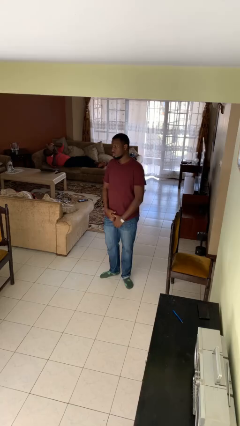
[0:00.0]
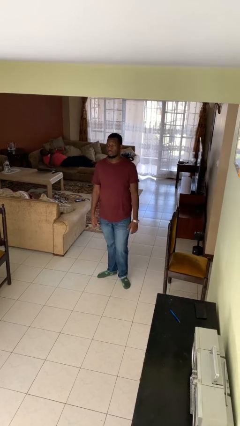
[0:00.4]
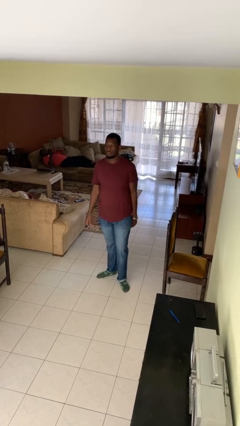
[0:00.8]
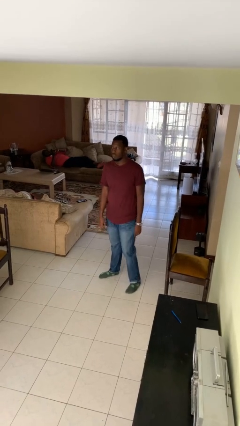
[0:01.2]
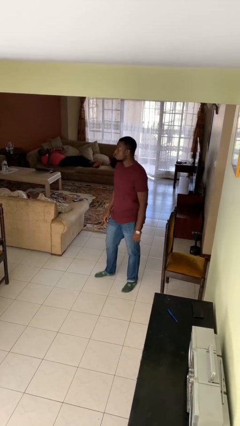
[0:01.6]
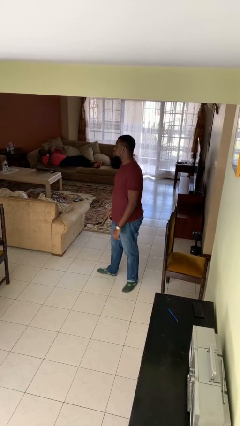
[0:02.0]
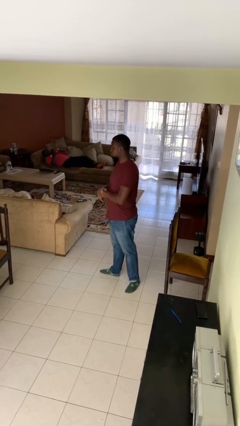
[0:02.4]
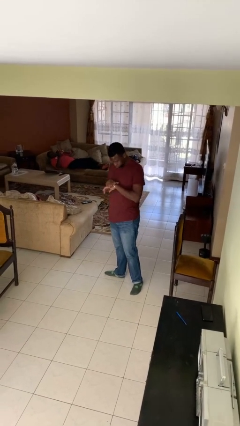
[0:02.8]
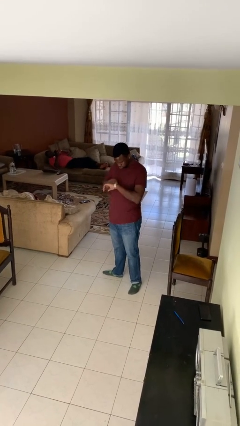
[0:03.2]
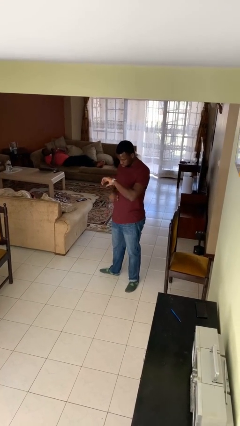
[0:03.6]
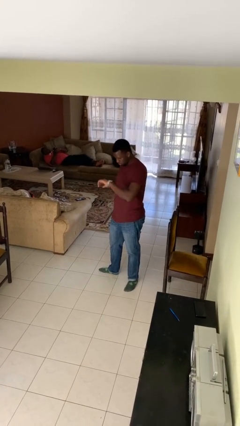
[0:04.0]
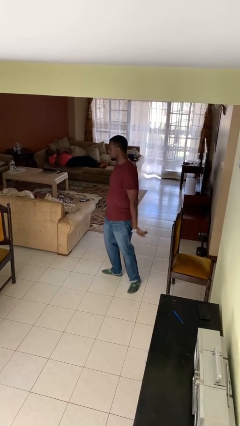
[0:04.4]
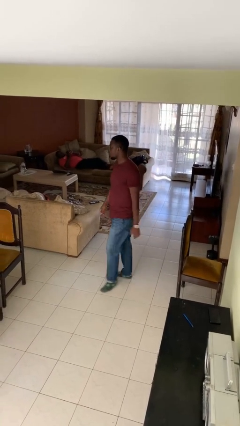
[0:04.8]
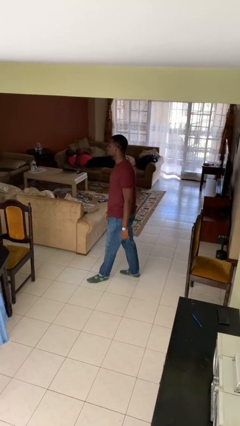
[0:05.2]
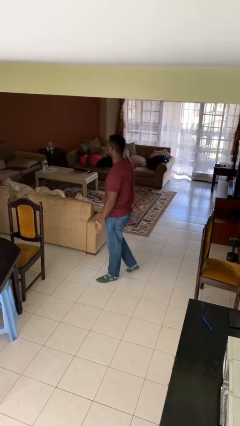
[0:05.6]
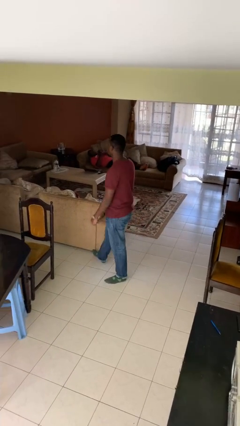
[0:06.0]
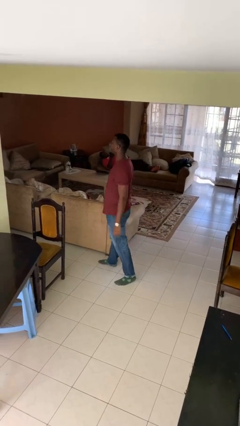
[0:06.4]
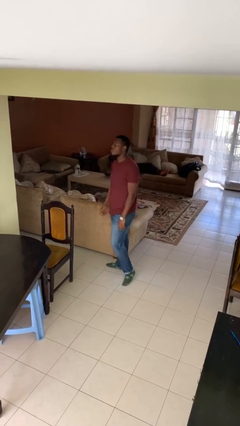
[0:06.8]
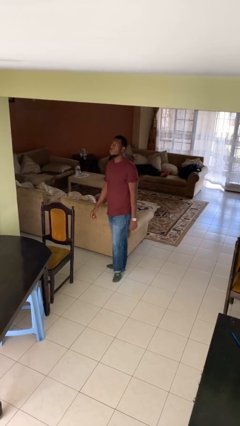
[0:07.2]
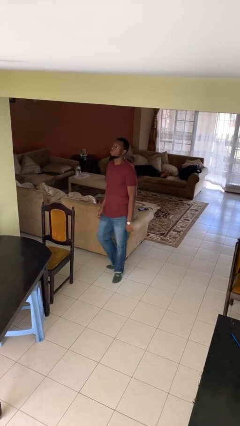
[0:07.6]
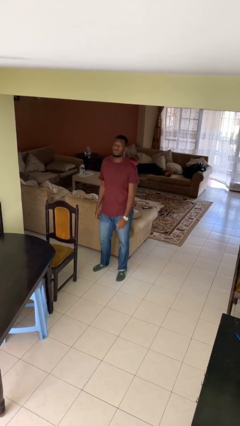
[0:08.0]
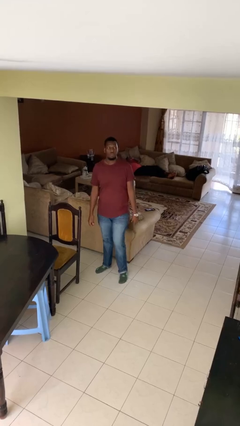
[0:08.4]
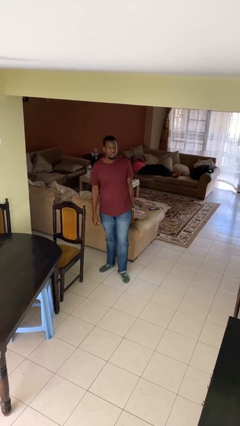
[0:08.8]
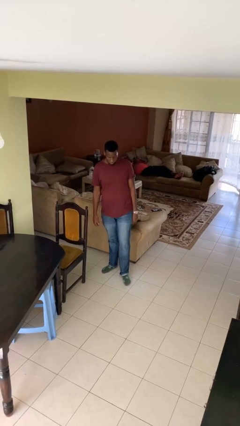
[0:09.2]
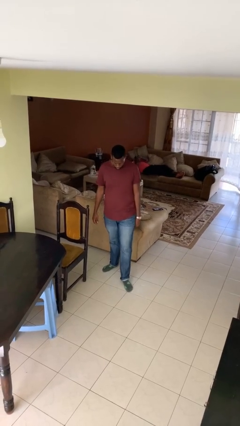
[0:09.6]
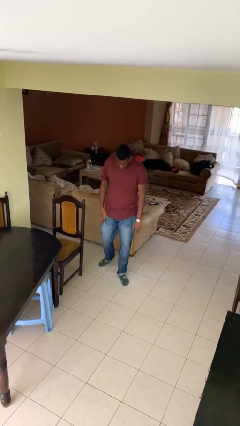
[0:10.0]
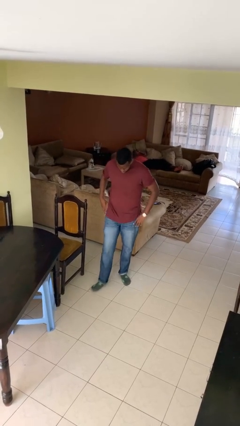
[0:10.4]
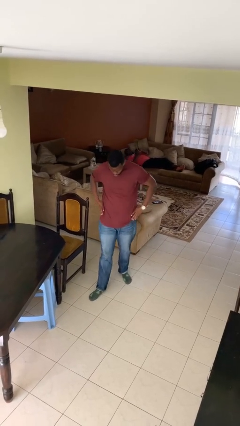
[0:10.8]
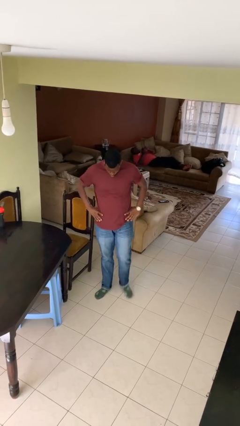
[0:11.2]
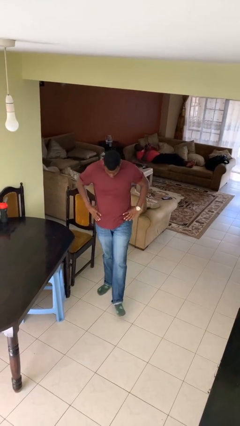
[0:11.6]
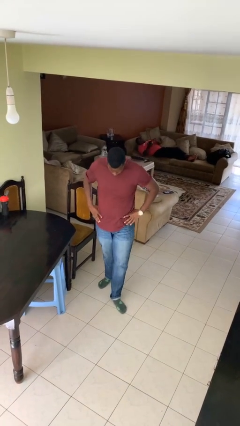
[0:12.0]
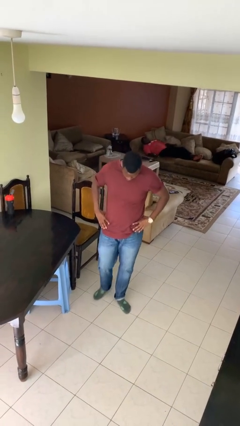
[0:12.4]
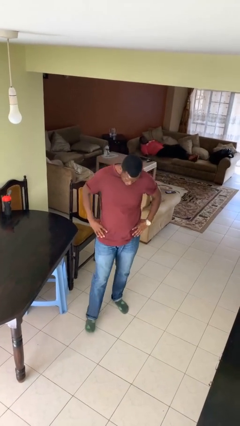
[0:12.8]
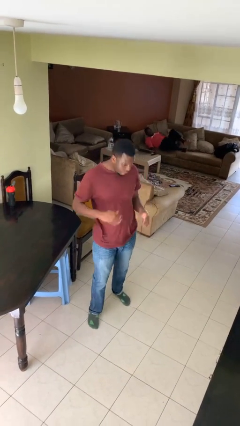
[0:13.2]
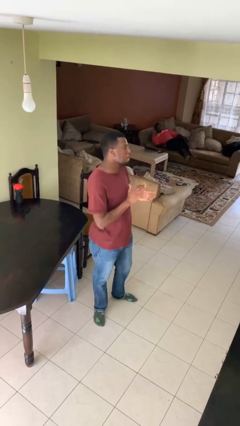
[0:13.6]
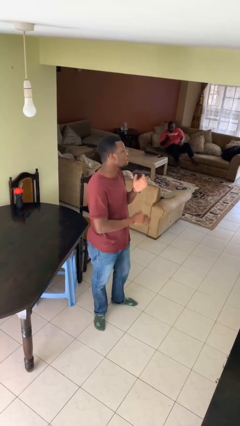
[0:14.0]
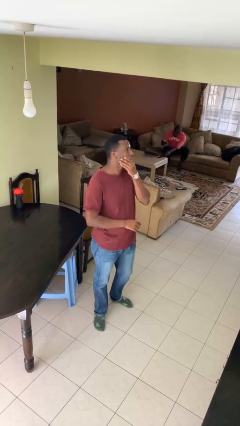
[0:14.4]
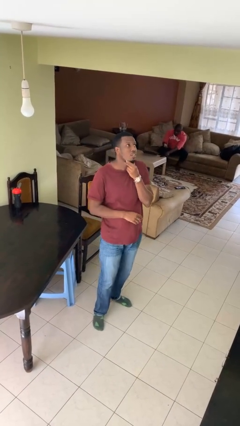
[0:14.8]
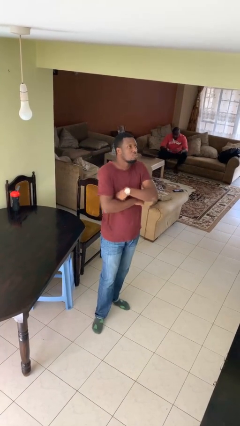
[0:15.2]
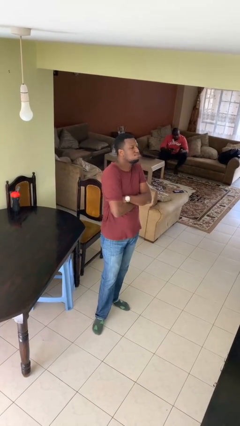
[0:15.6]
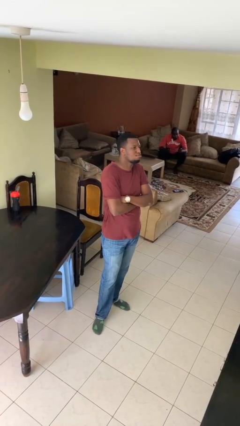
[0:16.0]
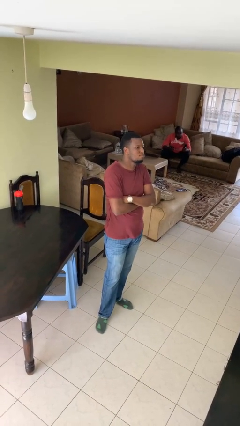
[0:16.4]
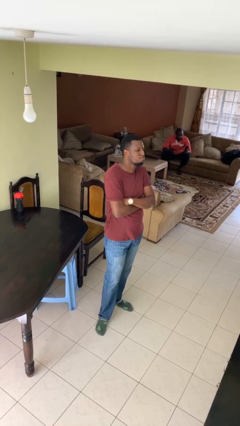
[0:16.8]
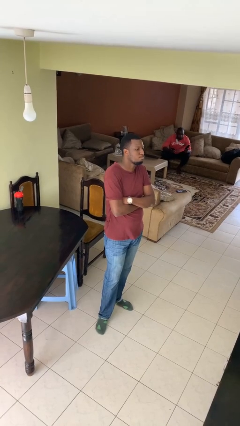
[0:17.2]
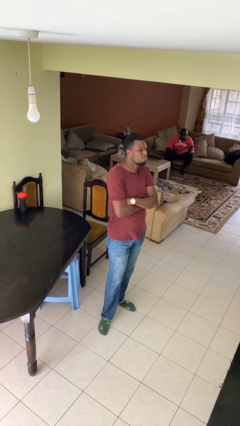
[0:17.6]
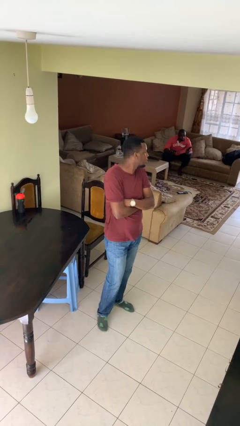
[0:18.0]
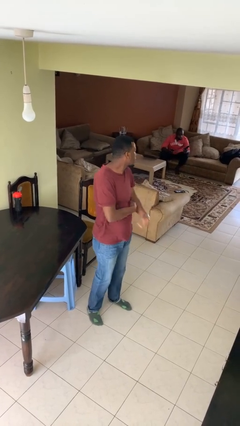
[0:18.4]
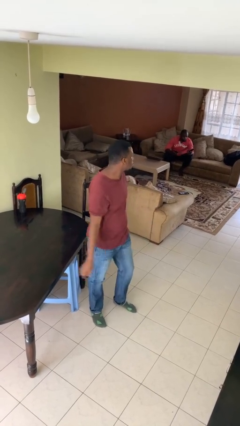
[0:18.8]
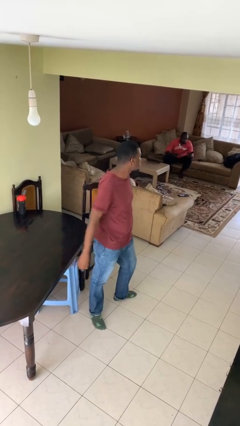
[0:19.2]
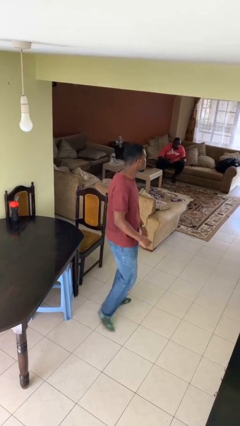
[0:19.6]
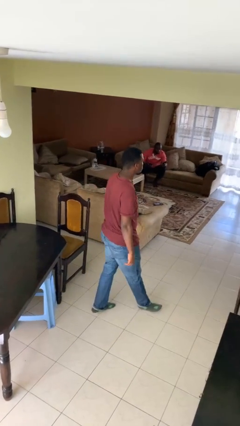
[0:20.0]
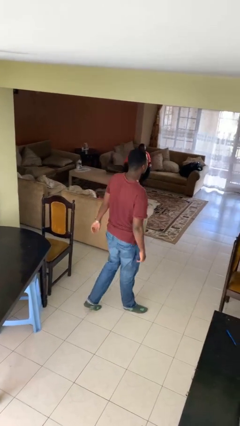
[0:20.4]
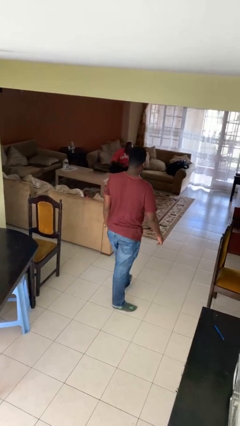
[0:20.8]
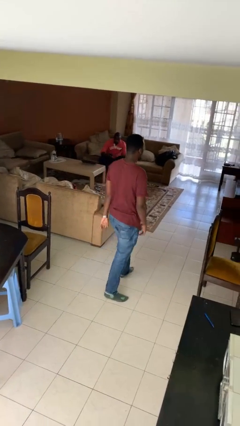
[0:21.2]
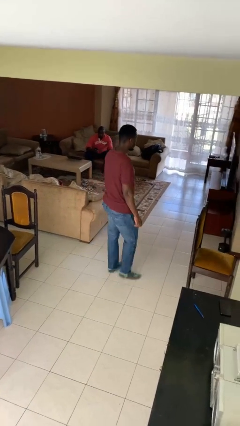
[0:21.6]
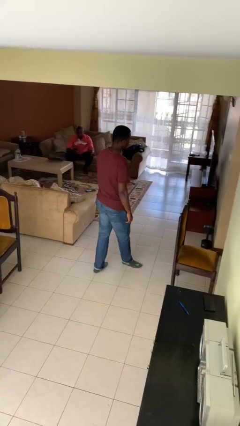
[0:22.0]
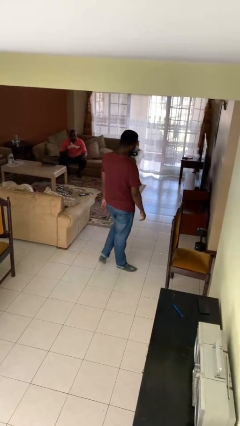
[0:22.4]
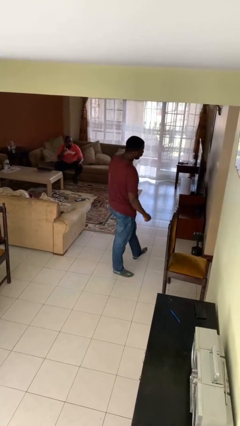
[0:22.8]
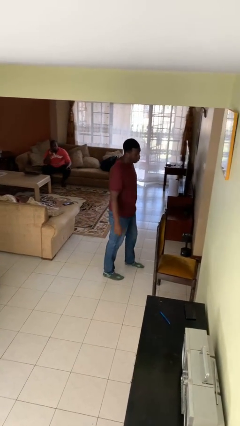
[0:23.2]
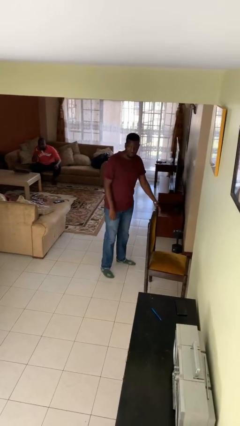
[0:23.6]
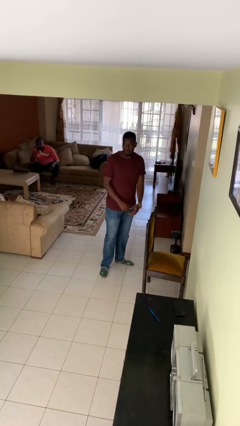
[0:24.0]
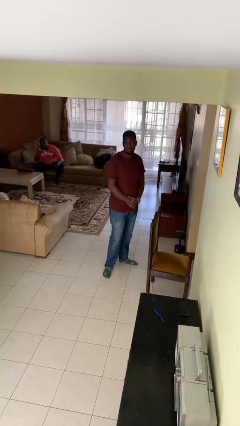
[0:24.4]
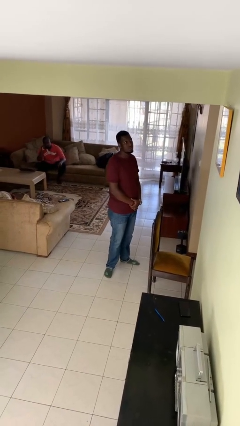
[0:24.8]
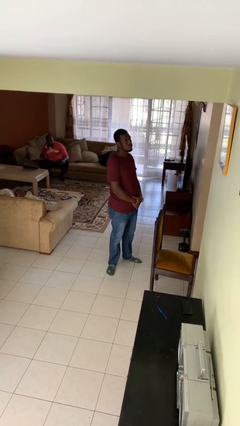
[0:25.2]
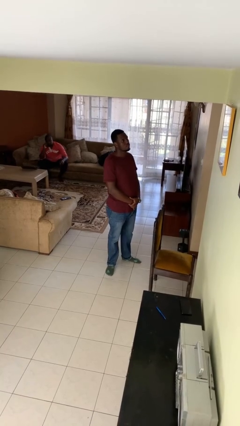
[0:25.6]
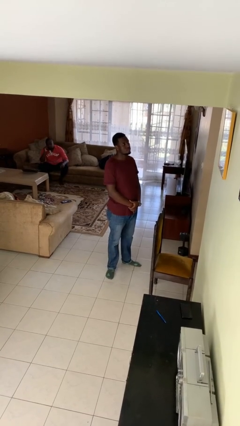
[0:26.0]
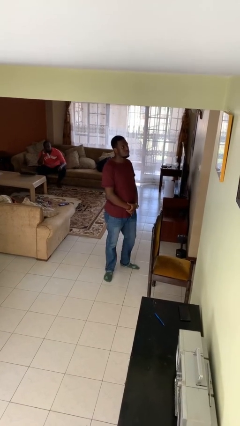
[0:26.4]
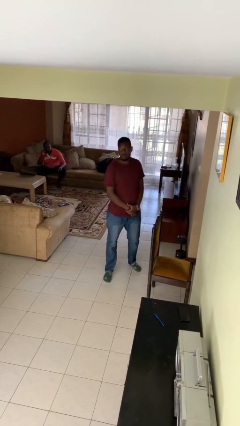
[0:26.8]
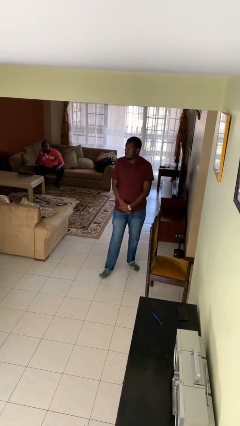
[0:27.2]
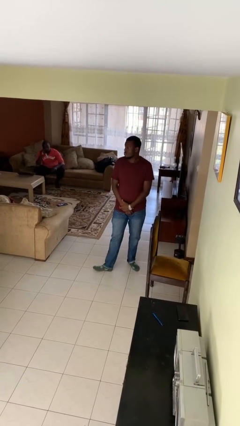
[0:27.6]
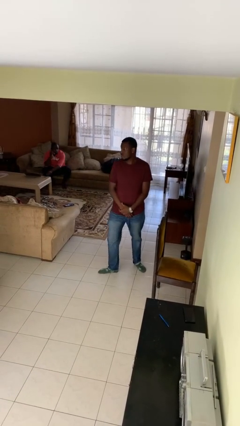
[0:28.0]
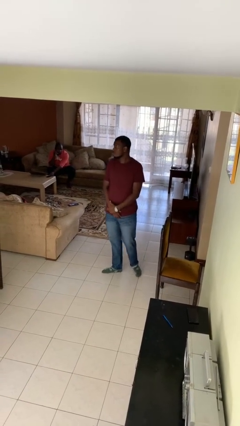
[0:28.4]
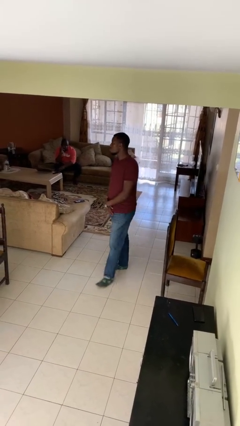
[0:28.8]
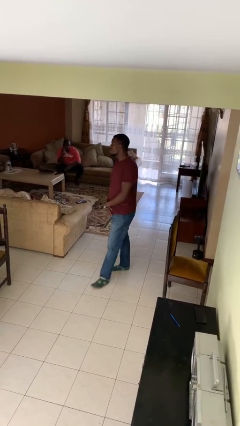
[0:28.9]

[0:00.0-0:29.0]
person walks

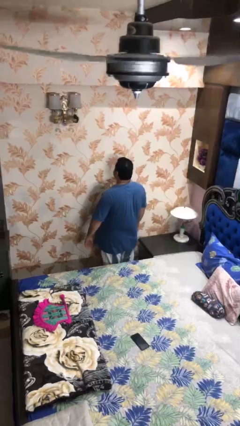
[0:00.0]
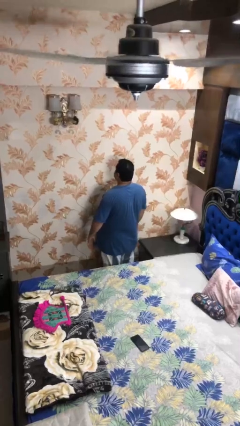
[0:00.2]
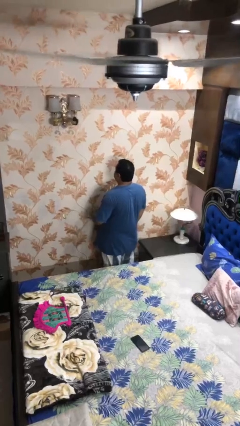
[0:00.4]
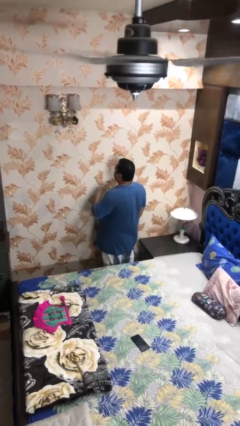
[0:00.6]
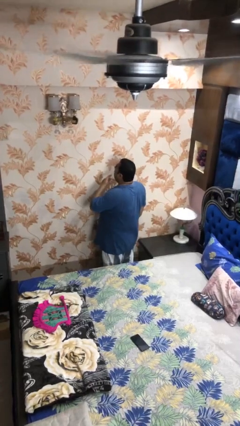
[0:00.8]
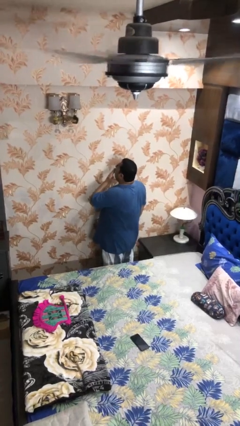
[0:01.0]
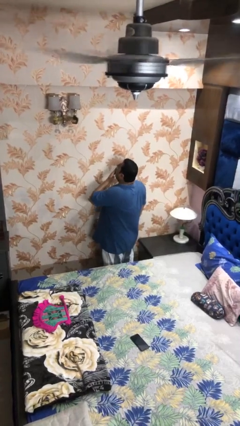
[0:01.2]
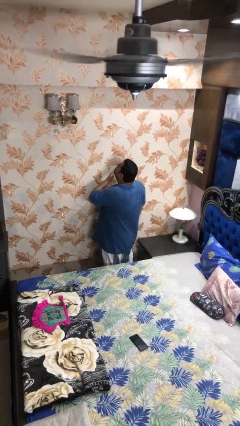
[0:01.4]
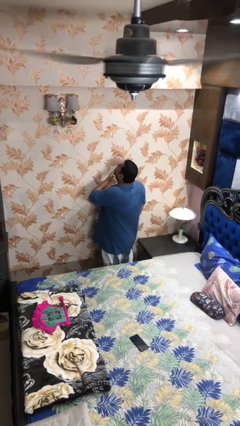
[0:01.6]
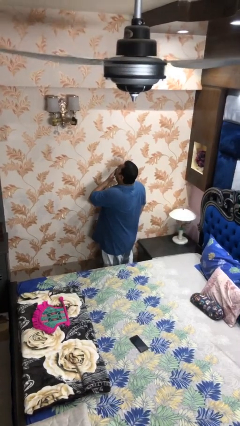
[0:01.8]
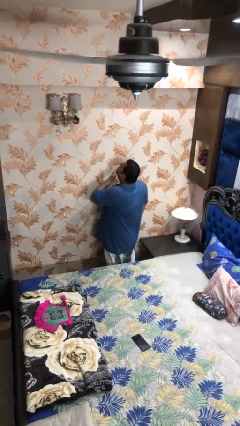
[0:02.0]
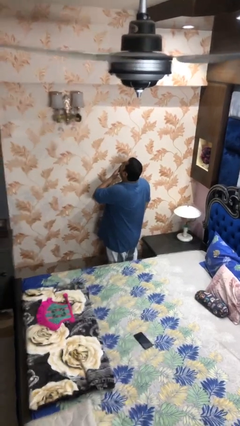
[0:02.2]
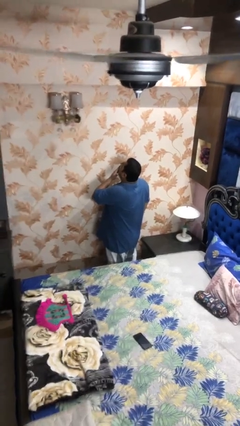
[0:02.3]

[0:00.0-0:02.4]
person yawns

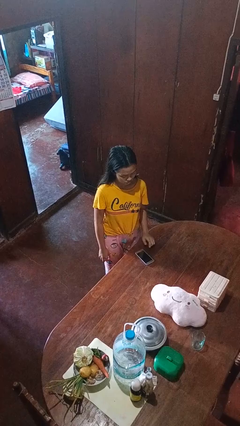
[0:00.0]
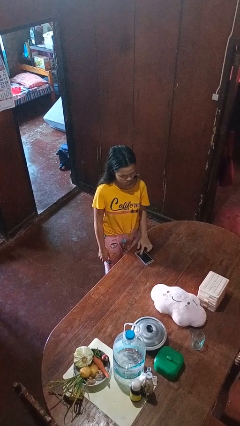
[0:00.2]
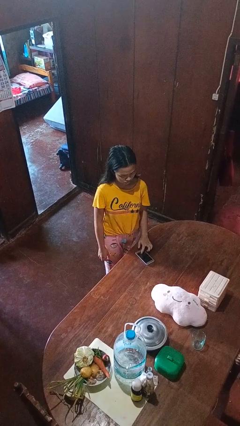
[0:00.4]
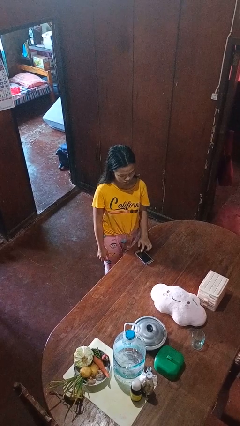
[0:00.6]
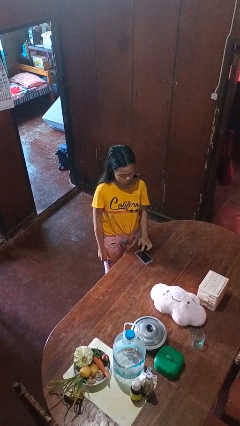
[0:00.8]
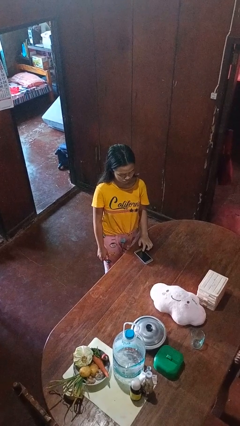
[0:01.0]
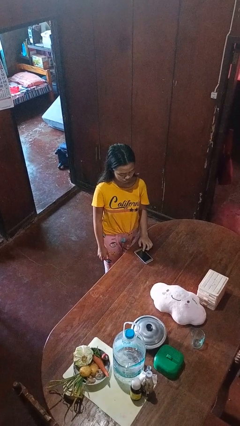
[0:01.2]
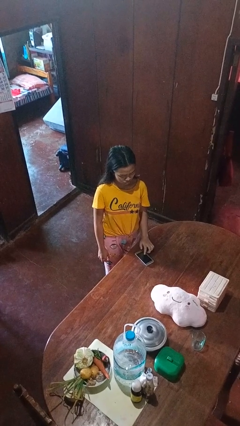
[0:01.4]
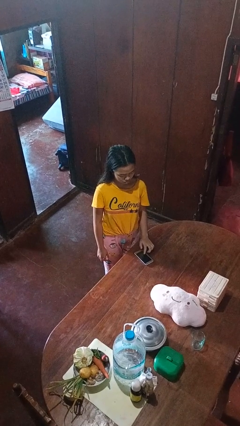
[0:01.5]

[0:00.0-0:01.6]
person taps object with finger
